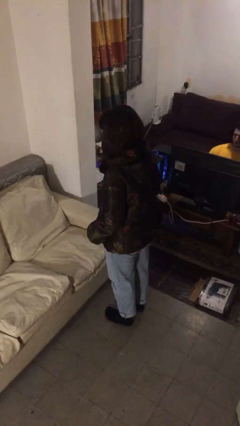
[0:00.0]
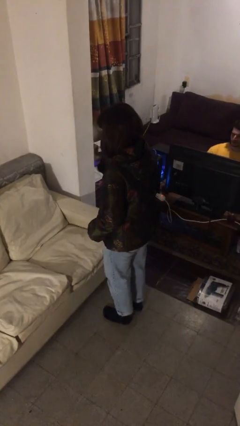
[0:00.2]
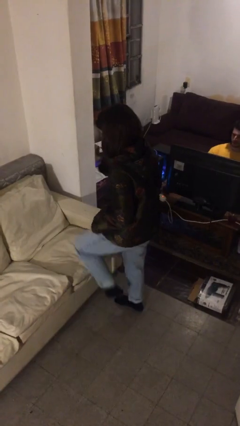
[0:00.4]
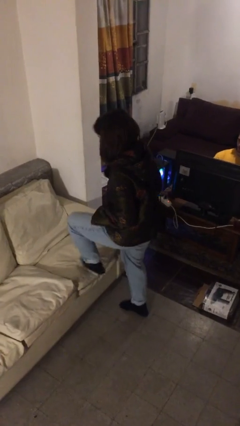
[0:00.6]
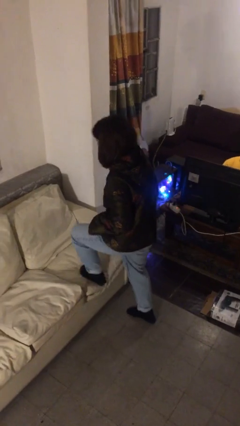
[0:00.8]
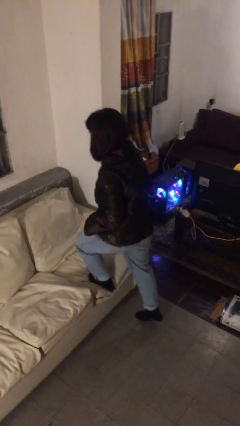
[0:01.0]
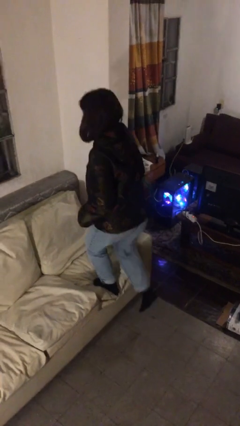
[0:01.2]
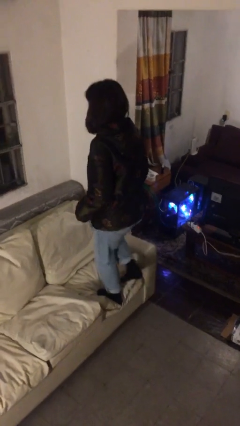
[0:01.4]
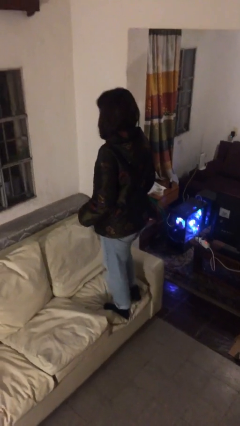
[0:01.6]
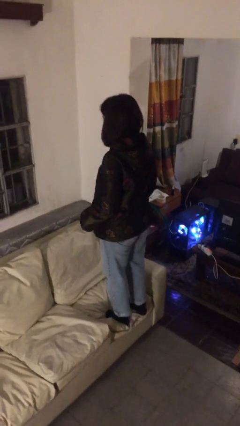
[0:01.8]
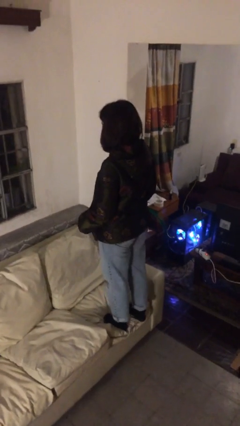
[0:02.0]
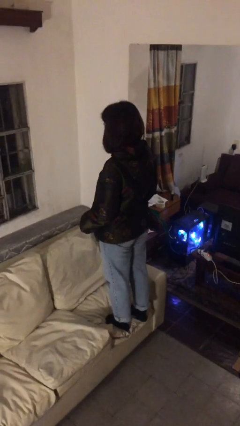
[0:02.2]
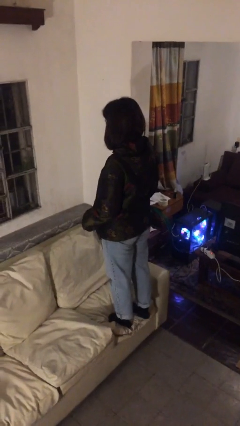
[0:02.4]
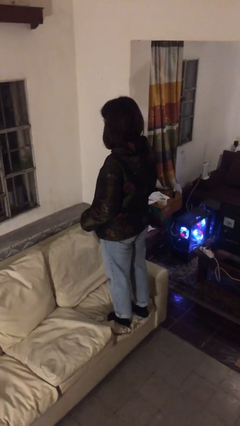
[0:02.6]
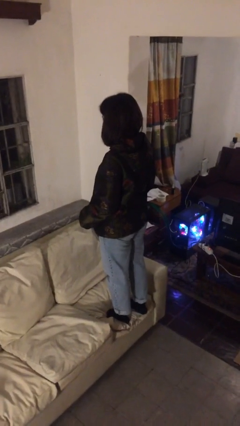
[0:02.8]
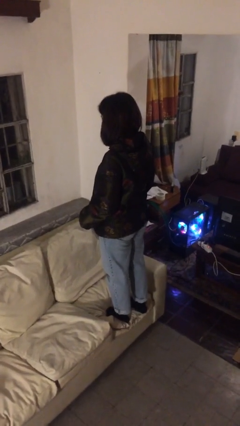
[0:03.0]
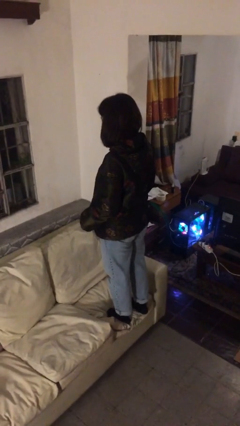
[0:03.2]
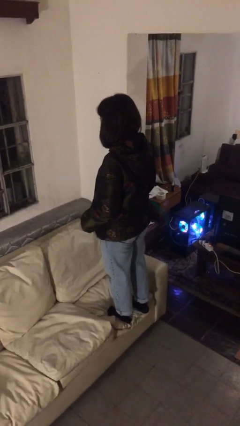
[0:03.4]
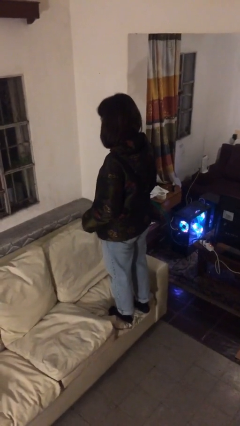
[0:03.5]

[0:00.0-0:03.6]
person climbs on couch

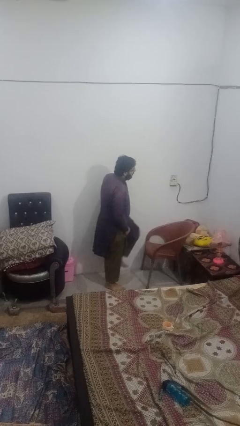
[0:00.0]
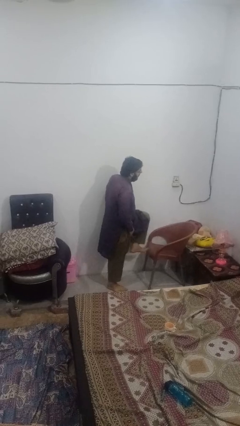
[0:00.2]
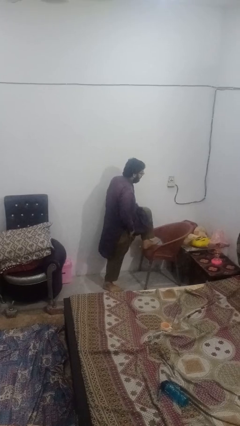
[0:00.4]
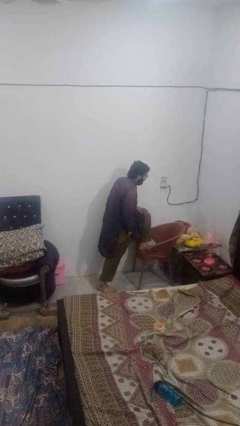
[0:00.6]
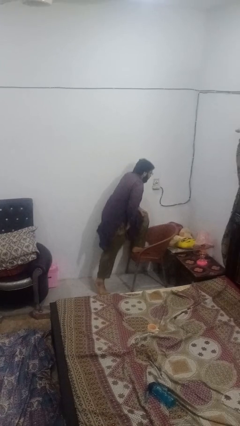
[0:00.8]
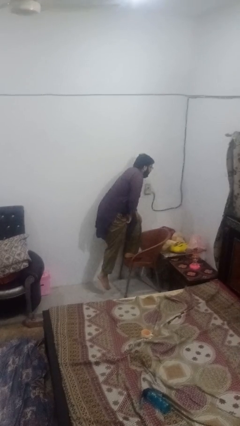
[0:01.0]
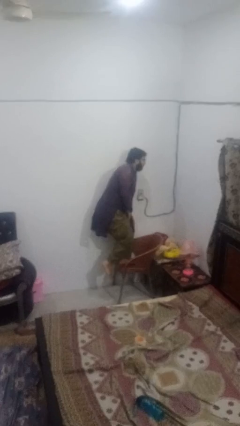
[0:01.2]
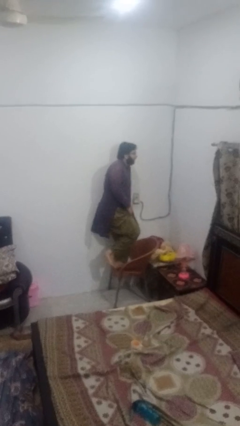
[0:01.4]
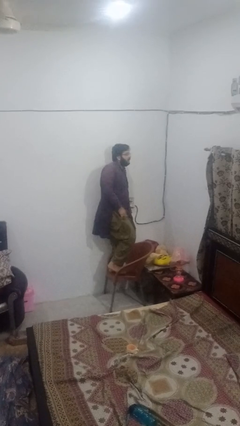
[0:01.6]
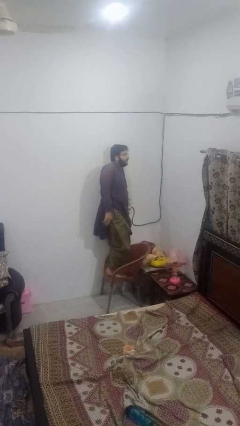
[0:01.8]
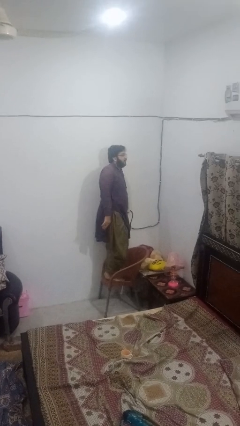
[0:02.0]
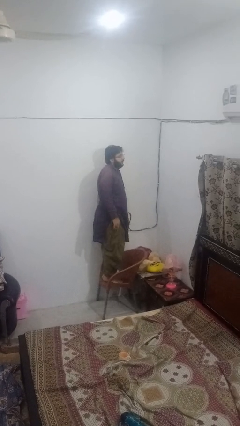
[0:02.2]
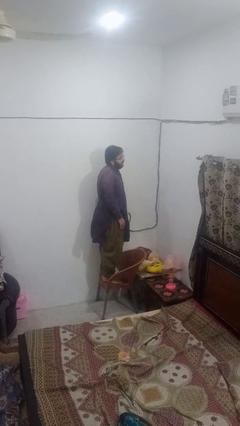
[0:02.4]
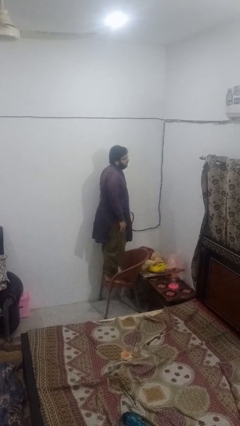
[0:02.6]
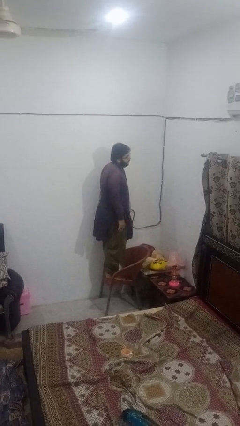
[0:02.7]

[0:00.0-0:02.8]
person climbs on chair

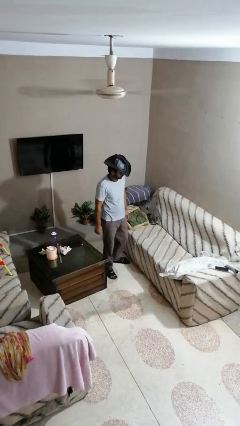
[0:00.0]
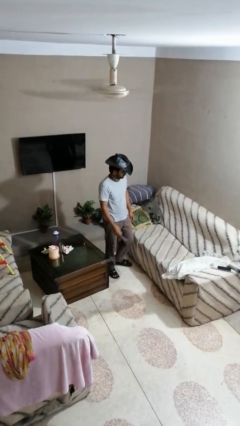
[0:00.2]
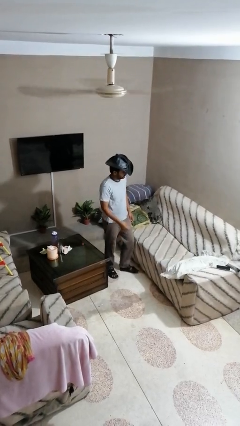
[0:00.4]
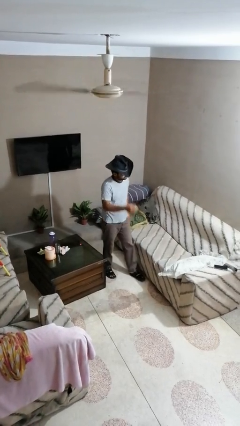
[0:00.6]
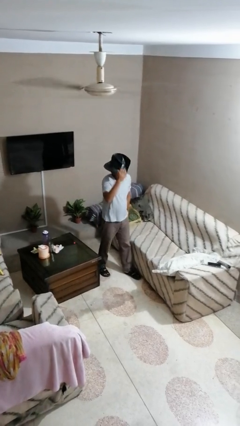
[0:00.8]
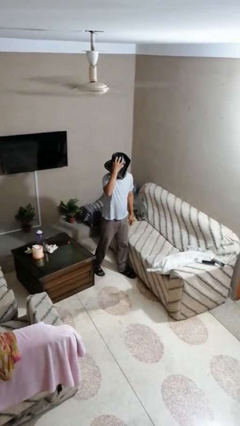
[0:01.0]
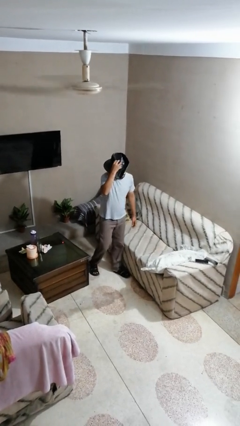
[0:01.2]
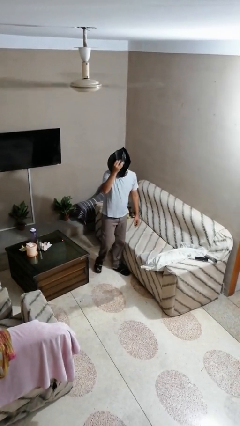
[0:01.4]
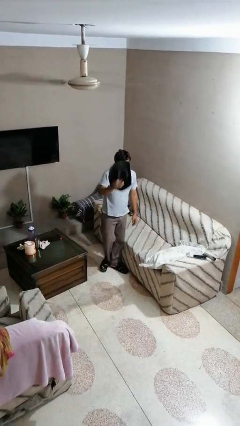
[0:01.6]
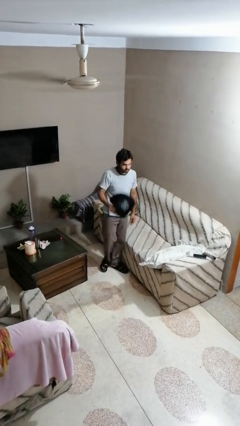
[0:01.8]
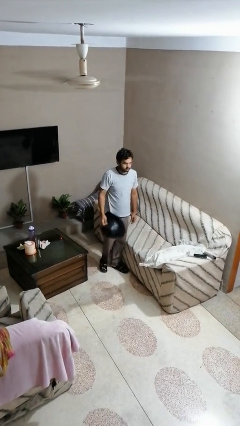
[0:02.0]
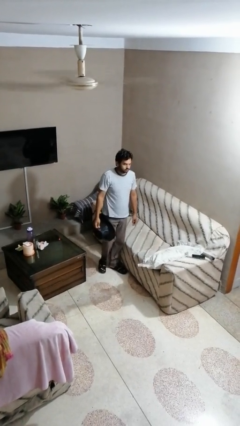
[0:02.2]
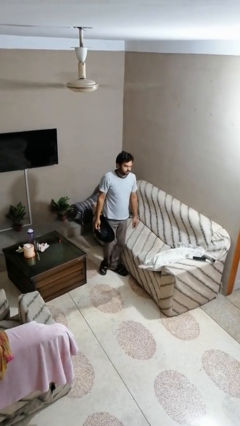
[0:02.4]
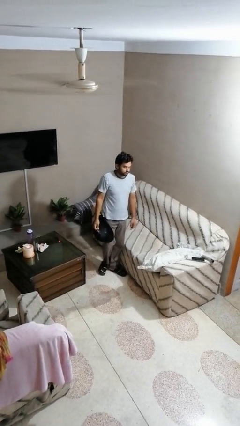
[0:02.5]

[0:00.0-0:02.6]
person takes off hat

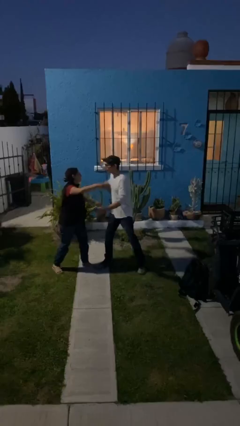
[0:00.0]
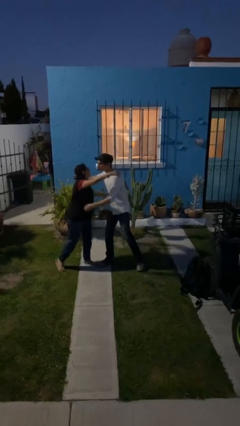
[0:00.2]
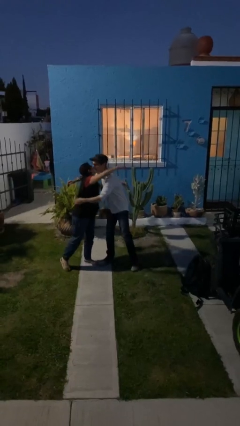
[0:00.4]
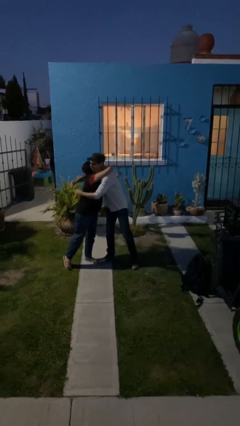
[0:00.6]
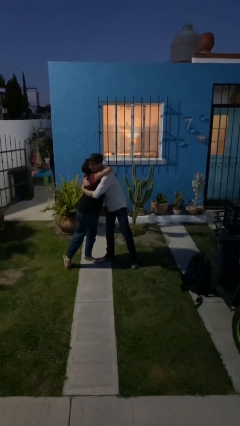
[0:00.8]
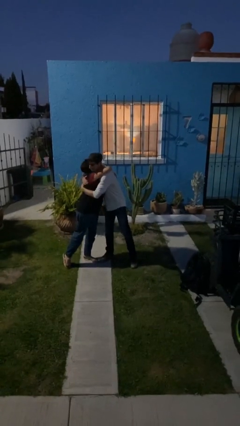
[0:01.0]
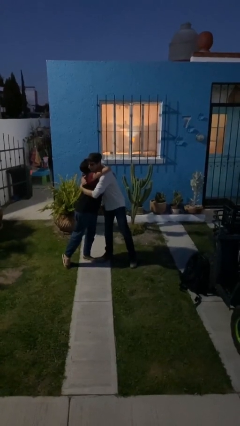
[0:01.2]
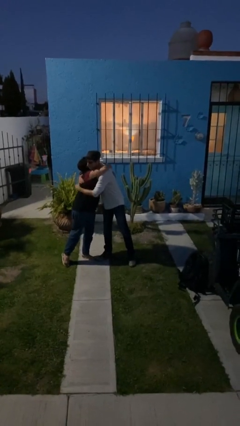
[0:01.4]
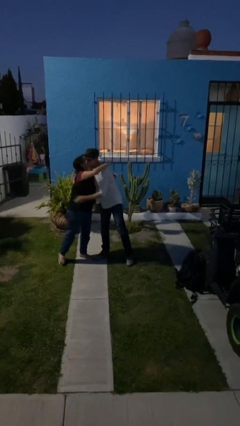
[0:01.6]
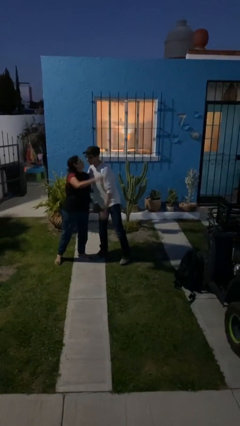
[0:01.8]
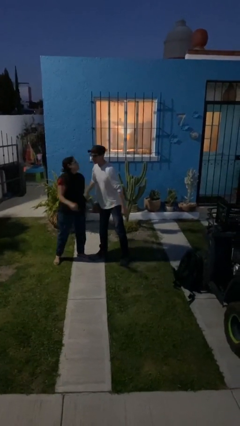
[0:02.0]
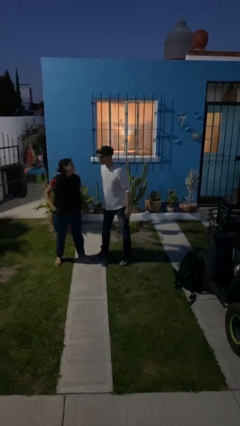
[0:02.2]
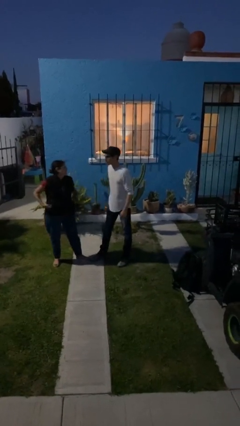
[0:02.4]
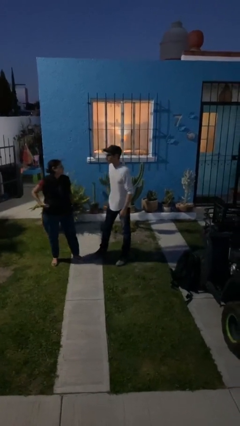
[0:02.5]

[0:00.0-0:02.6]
person embraces person

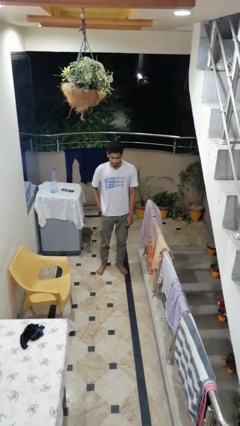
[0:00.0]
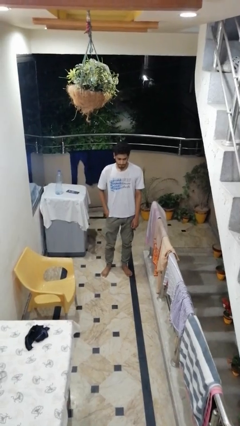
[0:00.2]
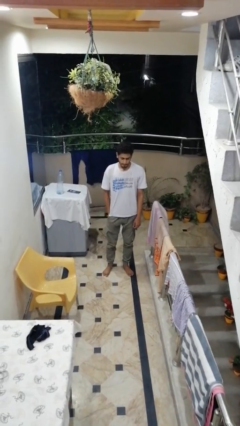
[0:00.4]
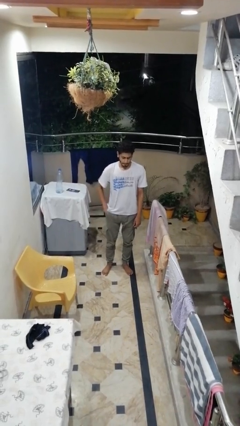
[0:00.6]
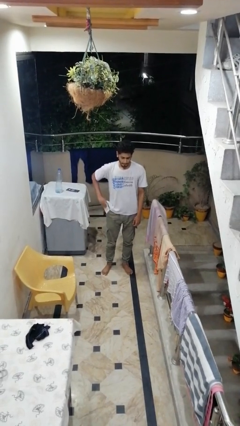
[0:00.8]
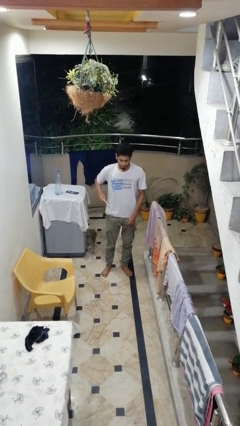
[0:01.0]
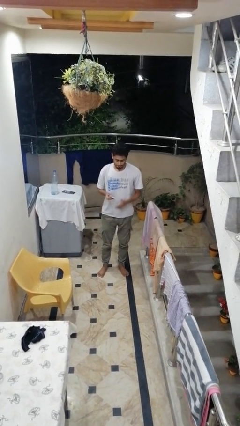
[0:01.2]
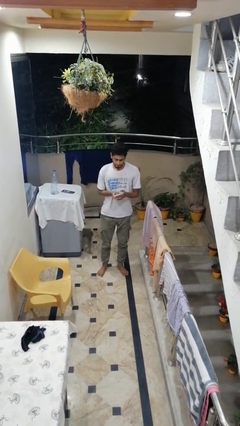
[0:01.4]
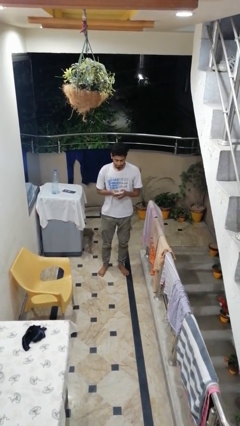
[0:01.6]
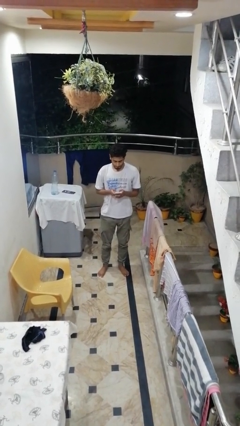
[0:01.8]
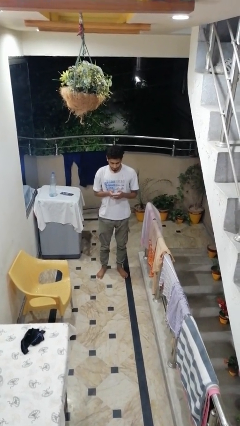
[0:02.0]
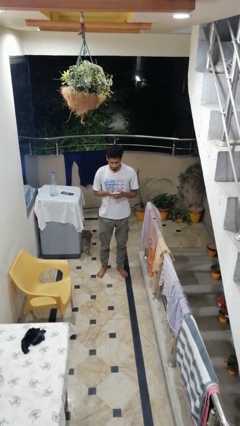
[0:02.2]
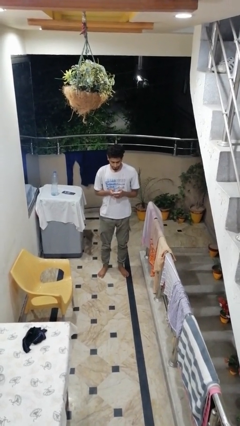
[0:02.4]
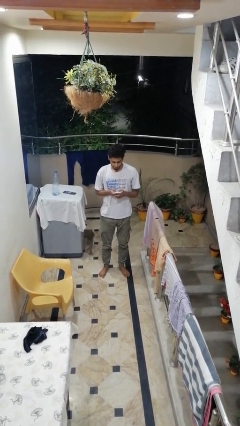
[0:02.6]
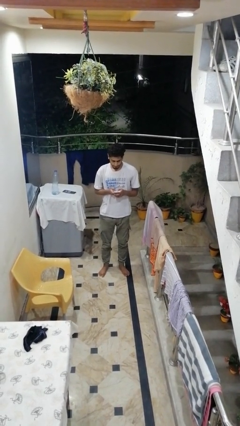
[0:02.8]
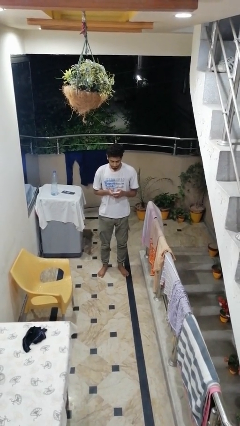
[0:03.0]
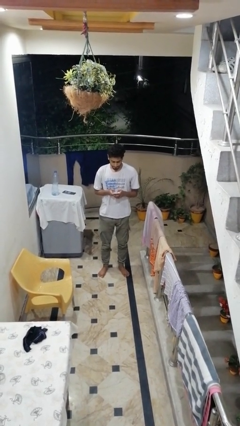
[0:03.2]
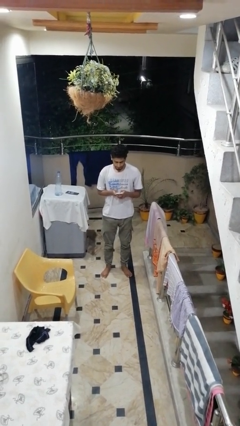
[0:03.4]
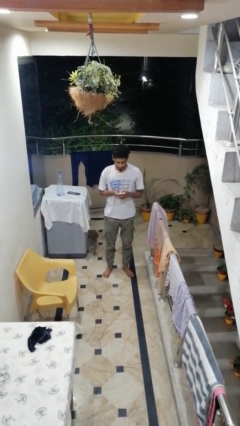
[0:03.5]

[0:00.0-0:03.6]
person takes phone from pocket

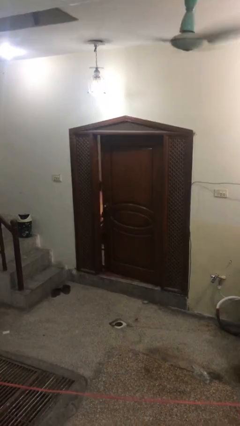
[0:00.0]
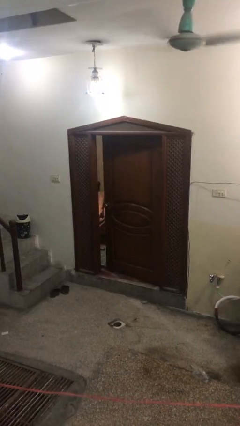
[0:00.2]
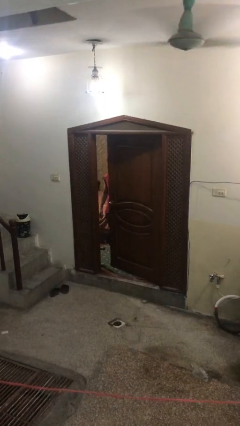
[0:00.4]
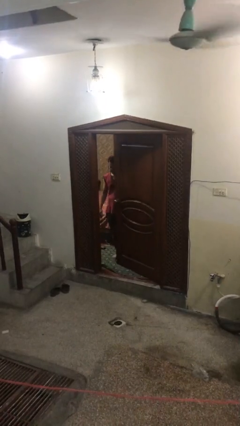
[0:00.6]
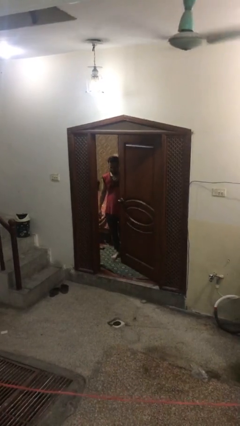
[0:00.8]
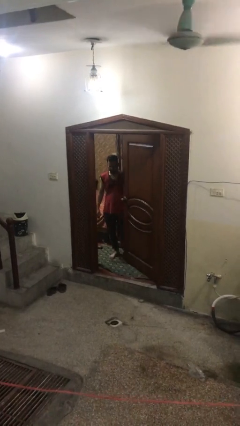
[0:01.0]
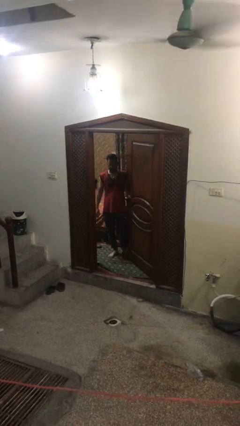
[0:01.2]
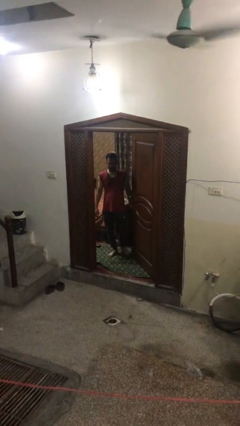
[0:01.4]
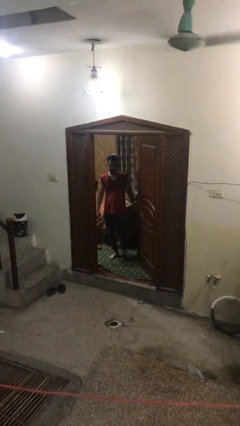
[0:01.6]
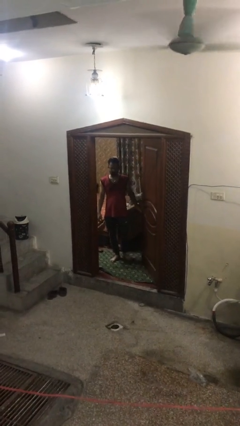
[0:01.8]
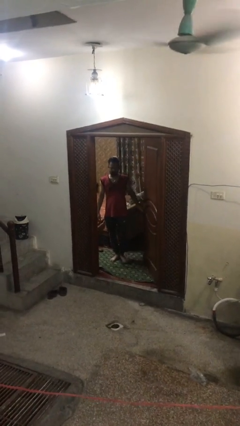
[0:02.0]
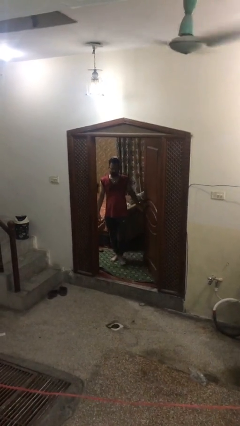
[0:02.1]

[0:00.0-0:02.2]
person opens facility door

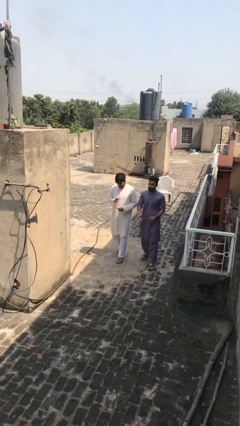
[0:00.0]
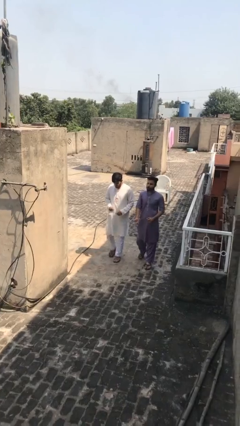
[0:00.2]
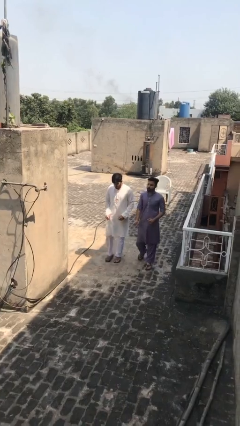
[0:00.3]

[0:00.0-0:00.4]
person talks to person
